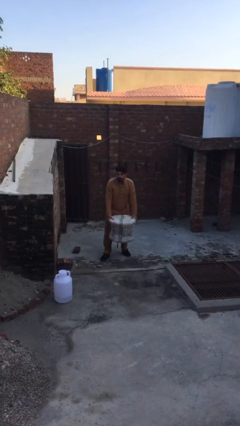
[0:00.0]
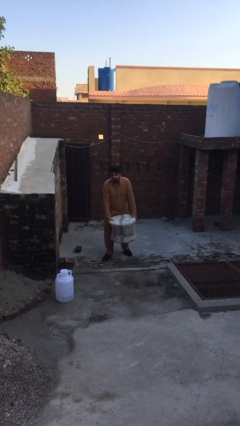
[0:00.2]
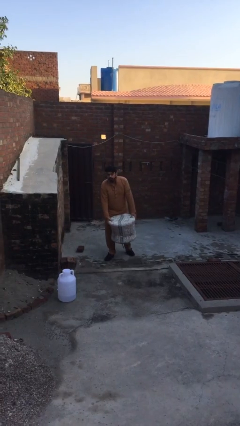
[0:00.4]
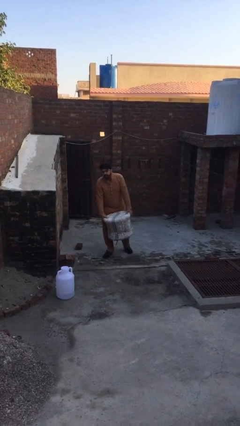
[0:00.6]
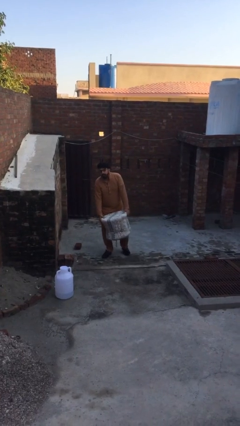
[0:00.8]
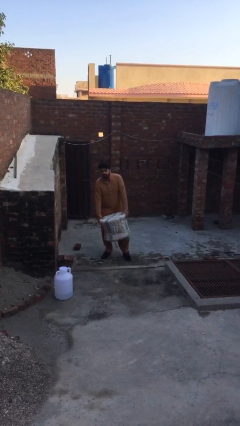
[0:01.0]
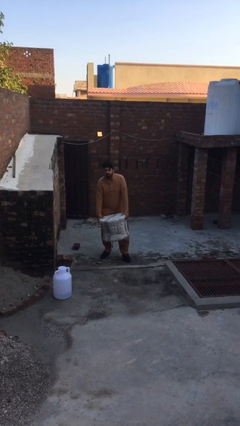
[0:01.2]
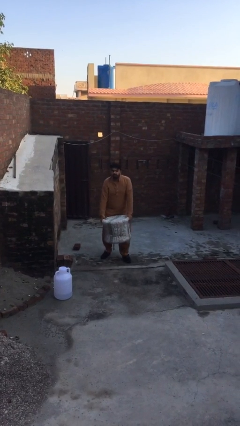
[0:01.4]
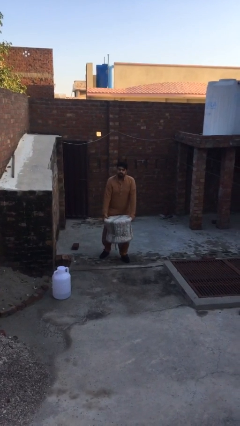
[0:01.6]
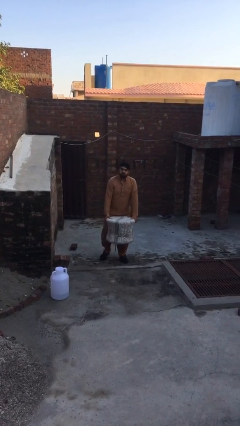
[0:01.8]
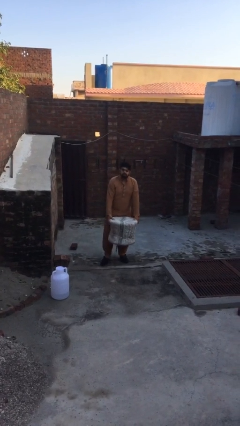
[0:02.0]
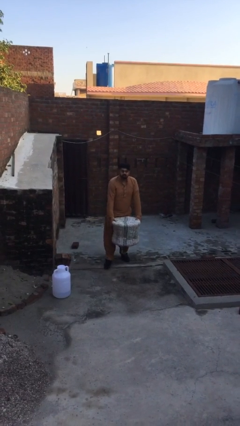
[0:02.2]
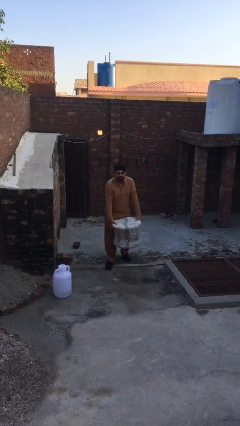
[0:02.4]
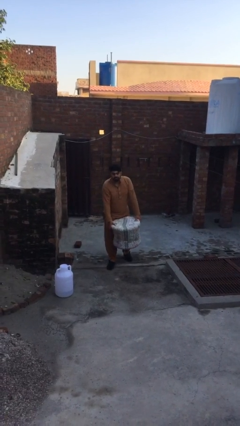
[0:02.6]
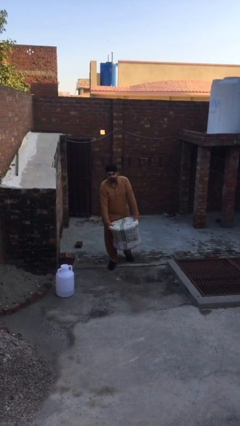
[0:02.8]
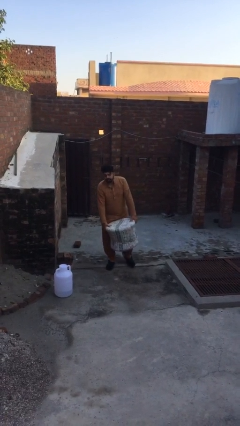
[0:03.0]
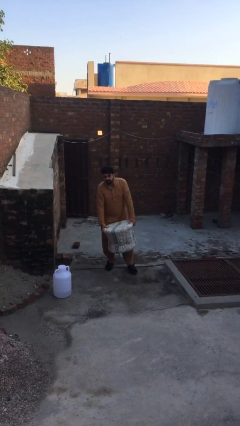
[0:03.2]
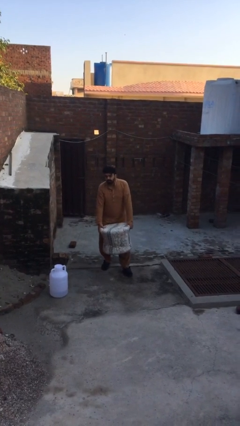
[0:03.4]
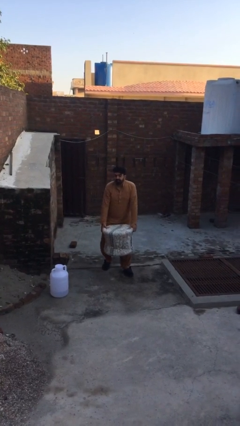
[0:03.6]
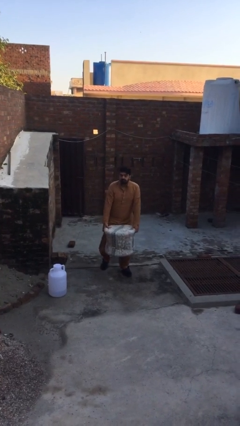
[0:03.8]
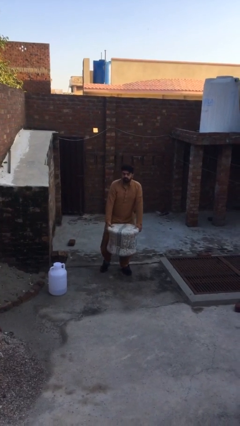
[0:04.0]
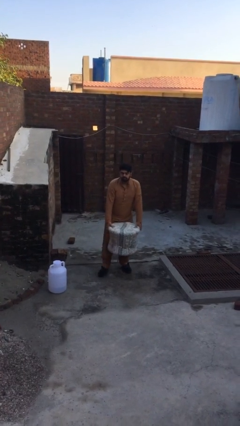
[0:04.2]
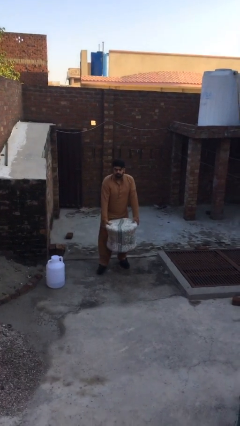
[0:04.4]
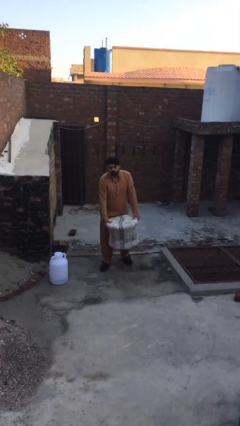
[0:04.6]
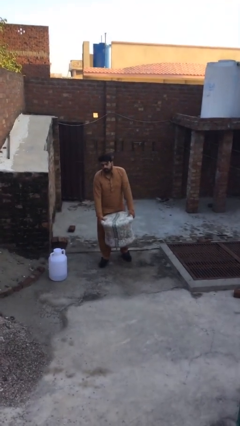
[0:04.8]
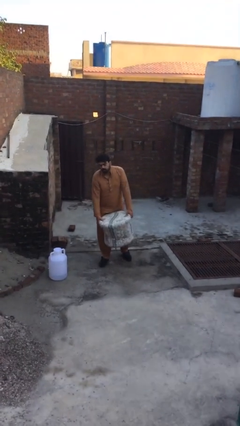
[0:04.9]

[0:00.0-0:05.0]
person carries heavy object

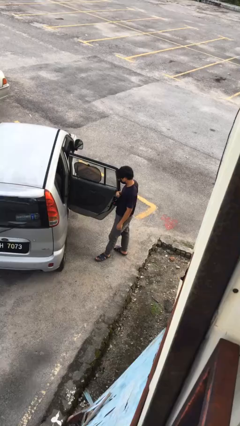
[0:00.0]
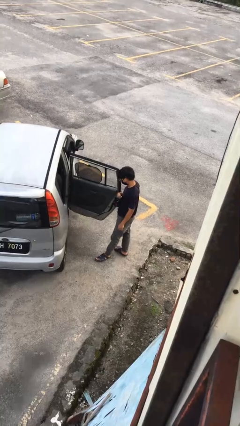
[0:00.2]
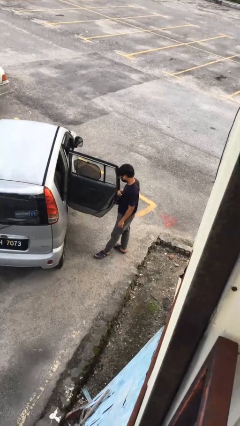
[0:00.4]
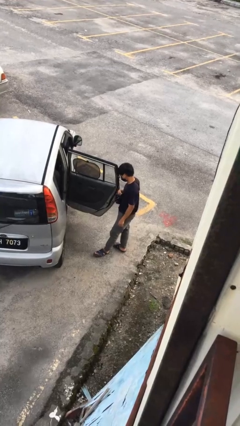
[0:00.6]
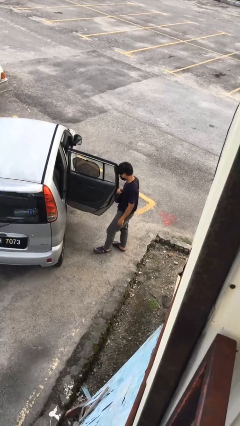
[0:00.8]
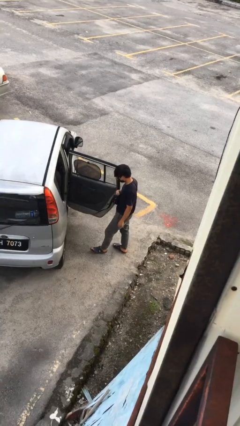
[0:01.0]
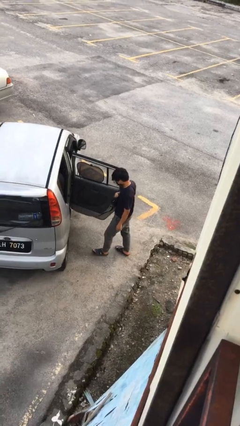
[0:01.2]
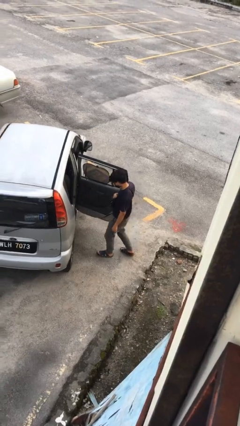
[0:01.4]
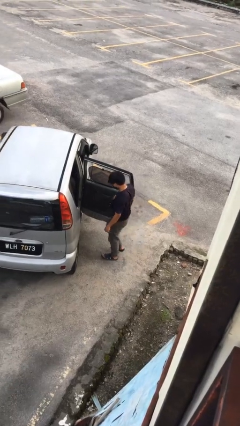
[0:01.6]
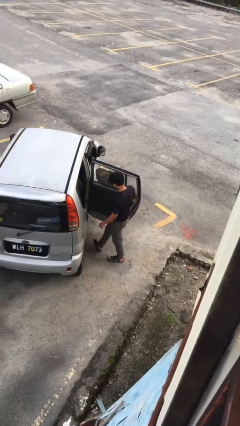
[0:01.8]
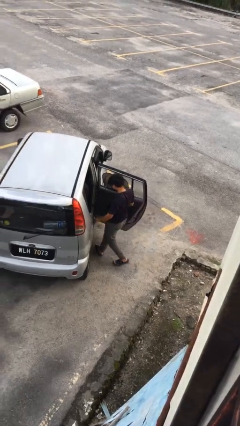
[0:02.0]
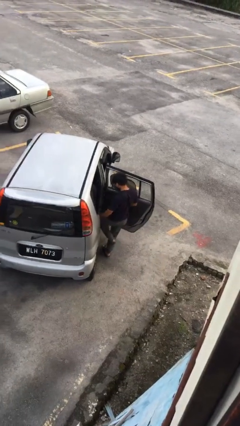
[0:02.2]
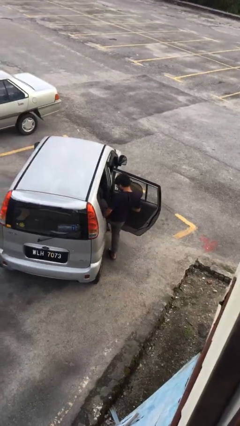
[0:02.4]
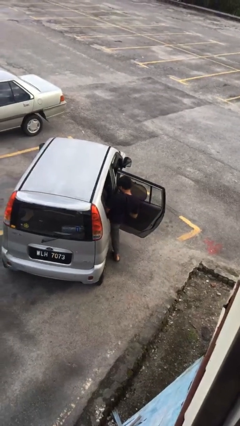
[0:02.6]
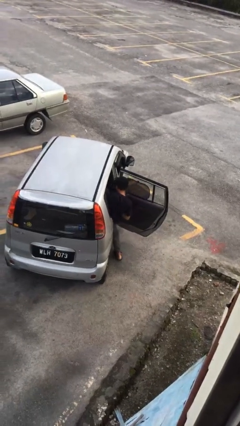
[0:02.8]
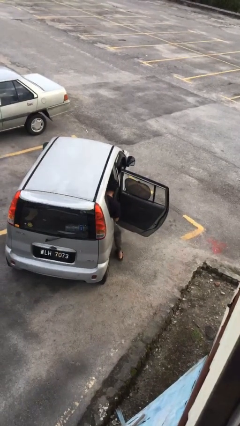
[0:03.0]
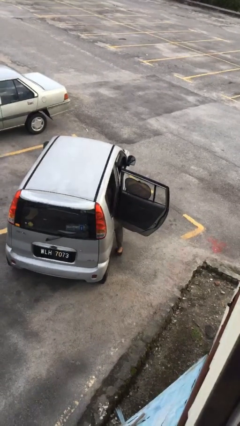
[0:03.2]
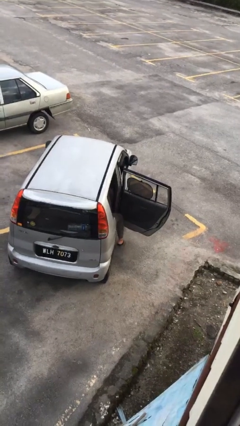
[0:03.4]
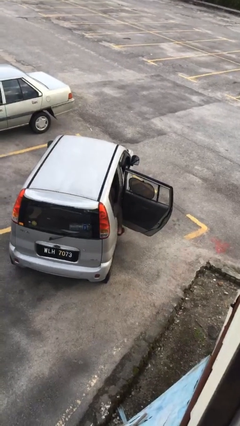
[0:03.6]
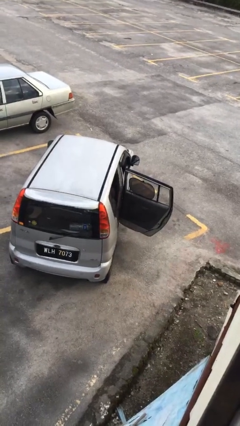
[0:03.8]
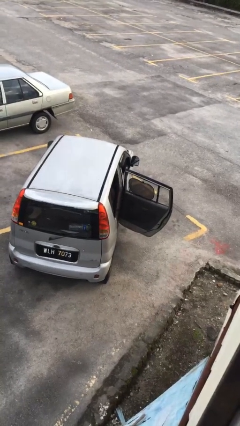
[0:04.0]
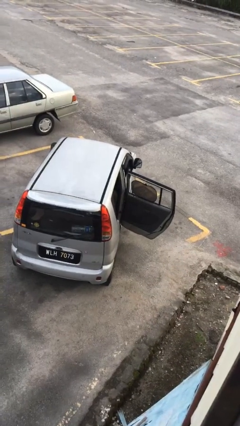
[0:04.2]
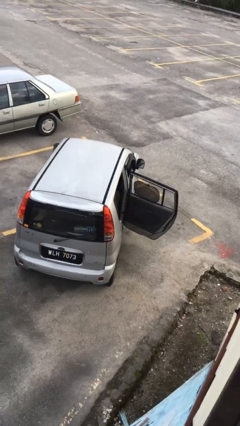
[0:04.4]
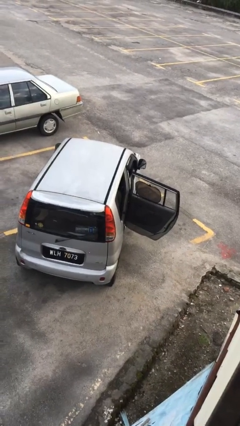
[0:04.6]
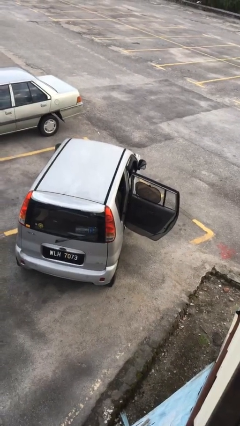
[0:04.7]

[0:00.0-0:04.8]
person enters car

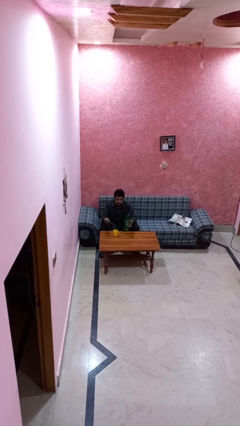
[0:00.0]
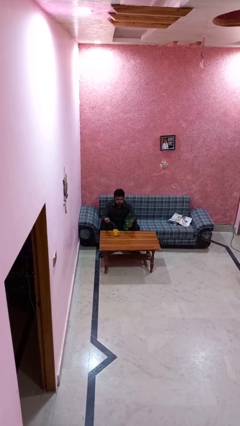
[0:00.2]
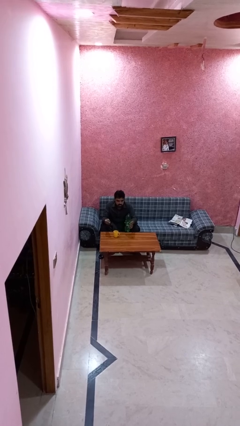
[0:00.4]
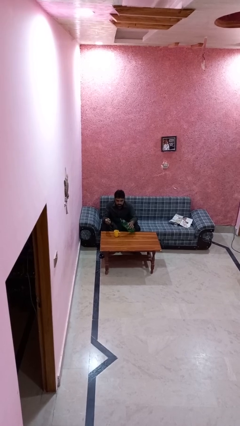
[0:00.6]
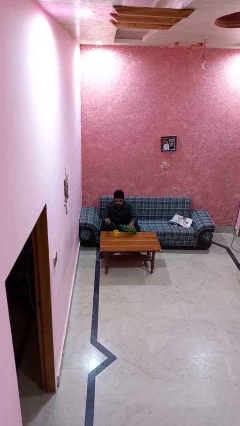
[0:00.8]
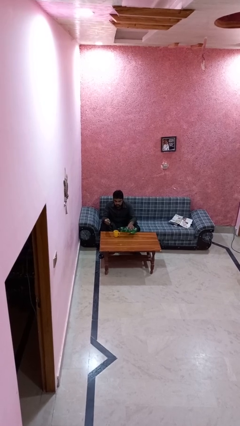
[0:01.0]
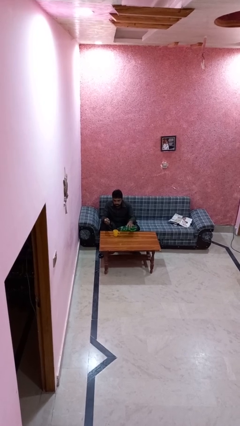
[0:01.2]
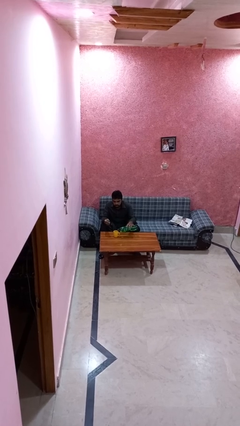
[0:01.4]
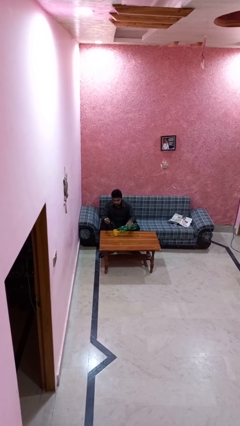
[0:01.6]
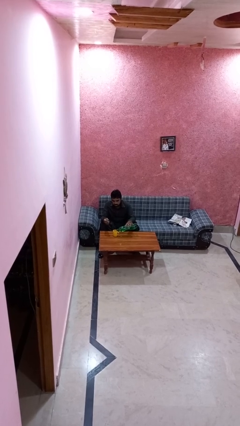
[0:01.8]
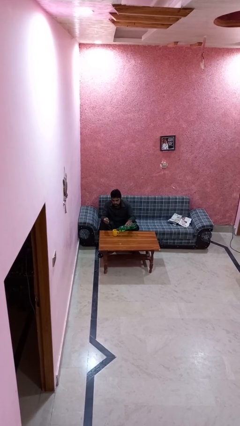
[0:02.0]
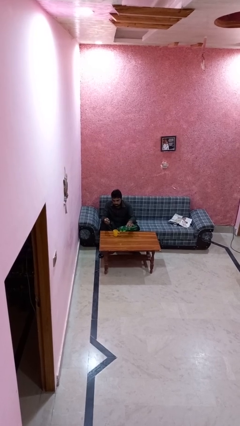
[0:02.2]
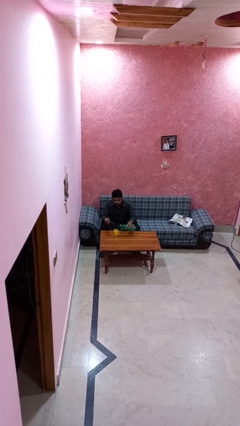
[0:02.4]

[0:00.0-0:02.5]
person pours liquid into cup

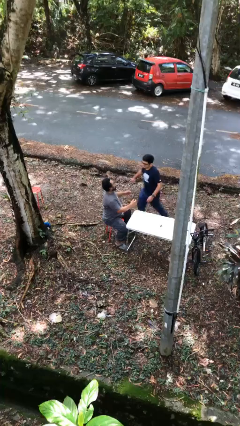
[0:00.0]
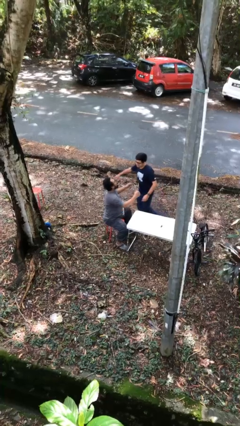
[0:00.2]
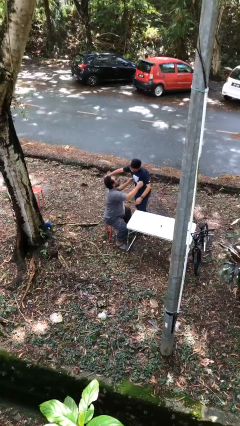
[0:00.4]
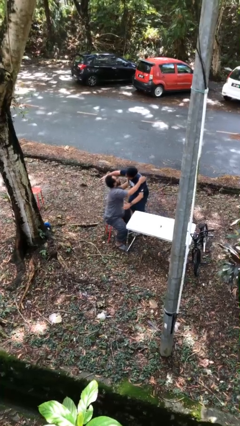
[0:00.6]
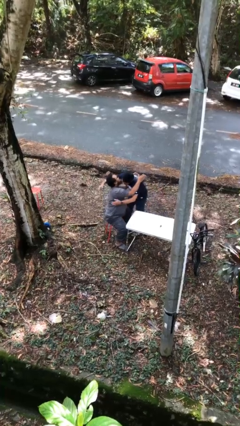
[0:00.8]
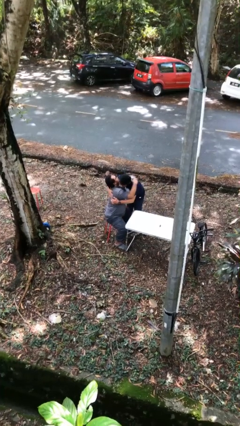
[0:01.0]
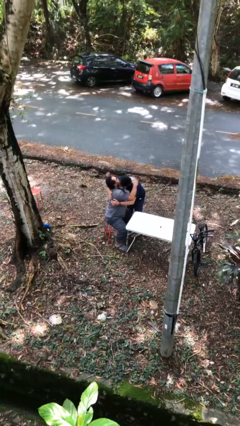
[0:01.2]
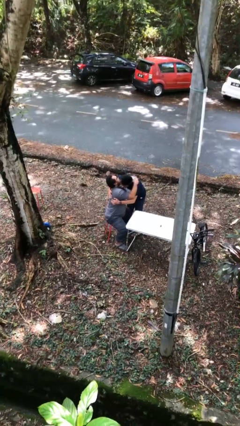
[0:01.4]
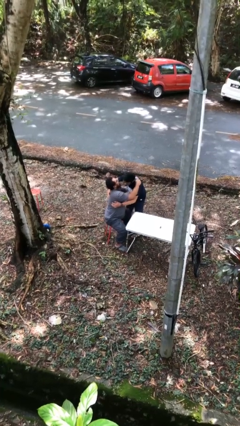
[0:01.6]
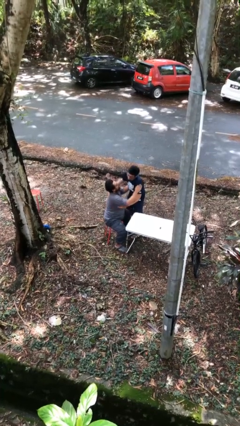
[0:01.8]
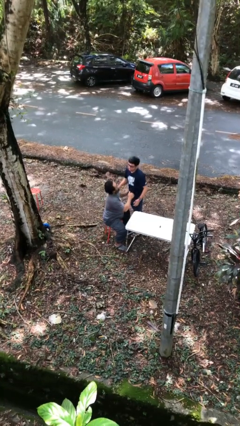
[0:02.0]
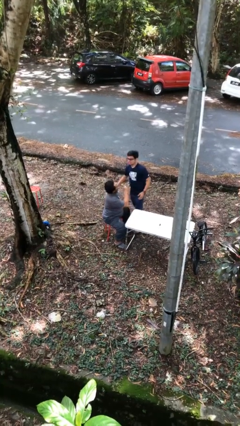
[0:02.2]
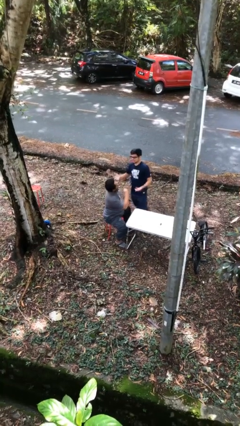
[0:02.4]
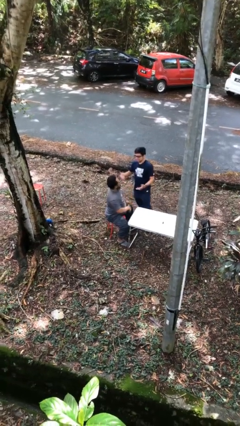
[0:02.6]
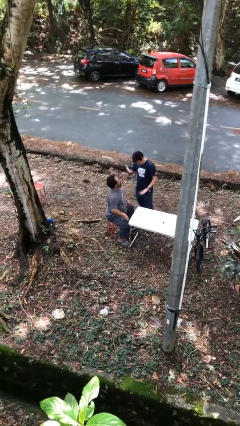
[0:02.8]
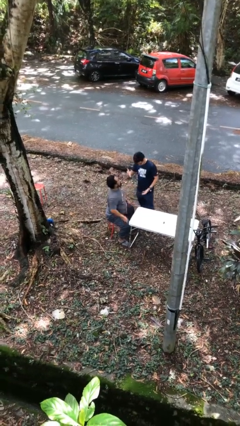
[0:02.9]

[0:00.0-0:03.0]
person embraces person

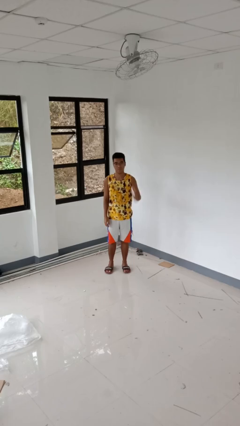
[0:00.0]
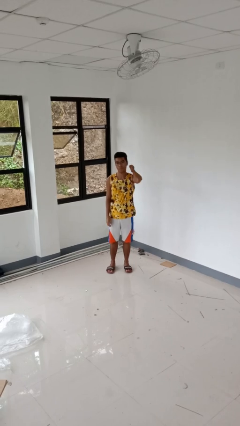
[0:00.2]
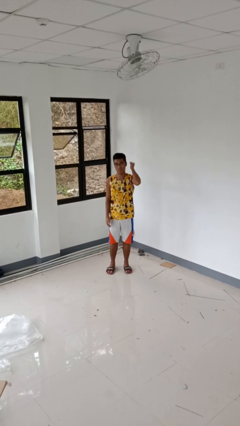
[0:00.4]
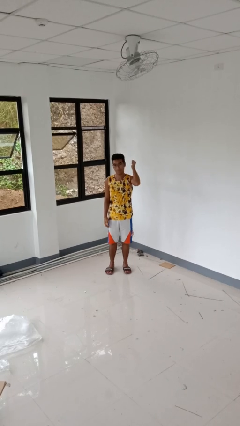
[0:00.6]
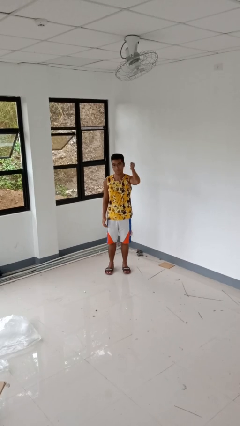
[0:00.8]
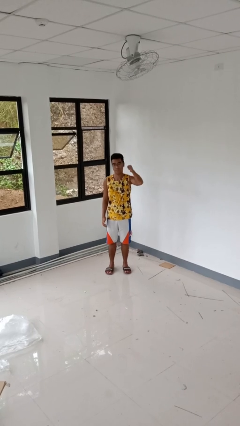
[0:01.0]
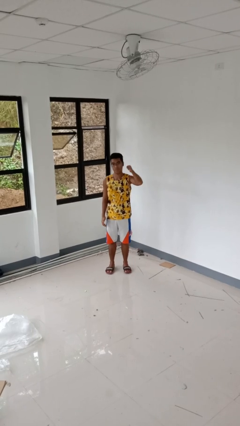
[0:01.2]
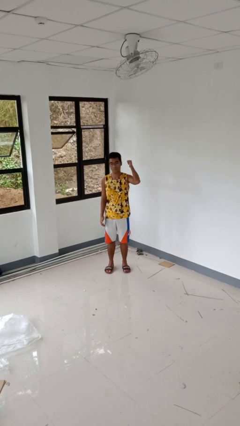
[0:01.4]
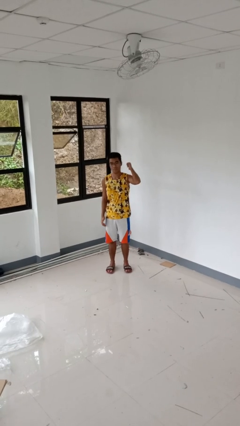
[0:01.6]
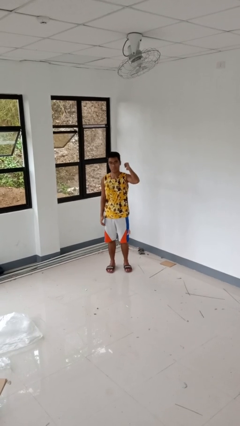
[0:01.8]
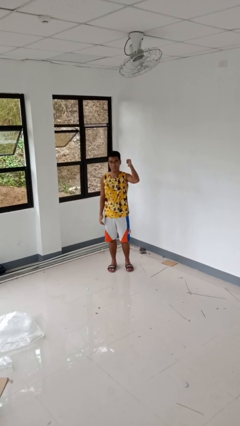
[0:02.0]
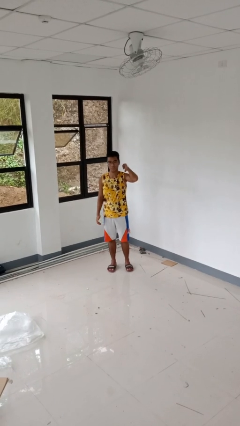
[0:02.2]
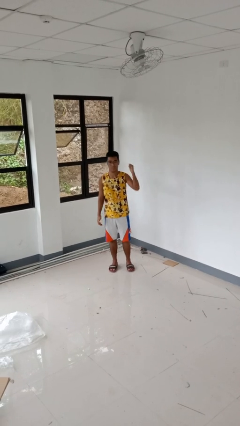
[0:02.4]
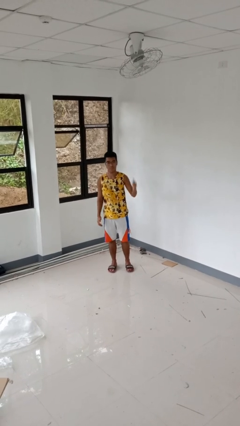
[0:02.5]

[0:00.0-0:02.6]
person gestures behind me

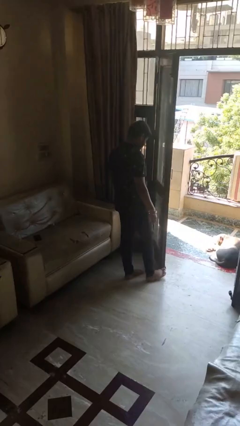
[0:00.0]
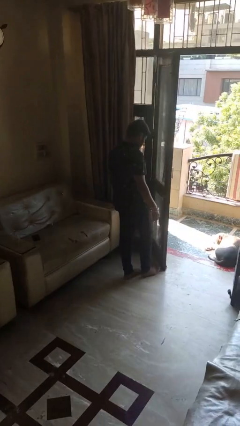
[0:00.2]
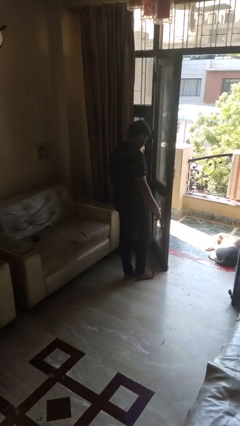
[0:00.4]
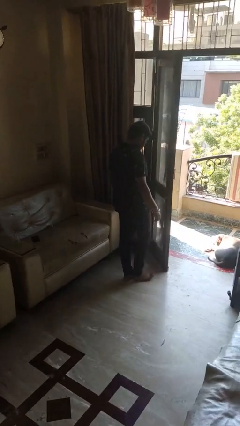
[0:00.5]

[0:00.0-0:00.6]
person stubs toe
